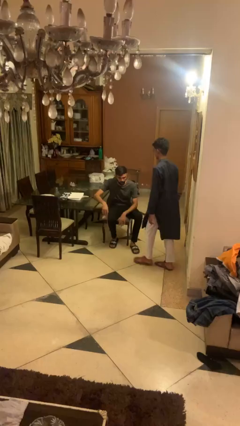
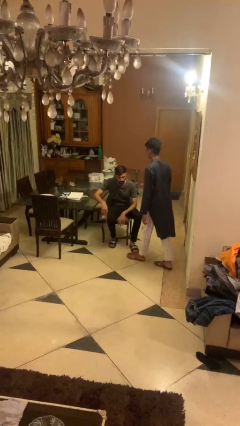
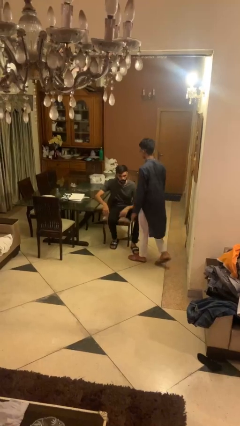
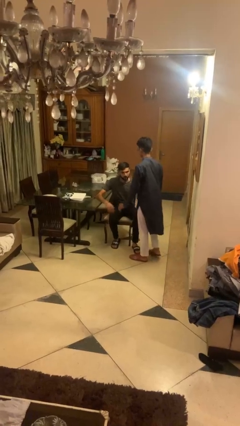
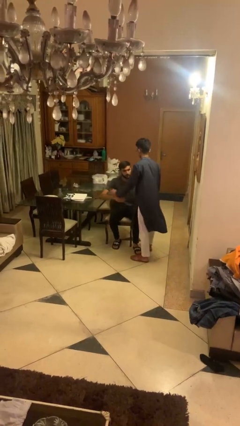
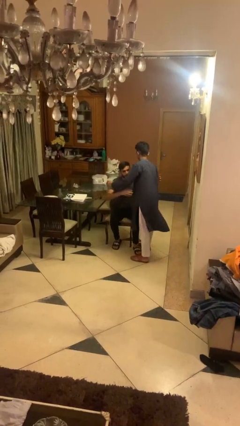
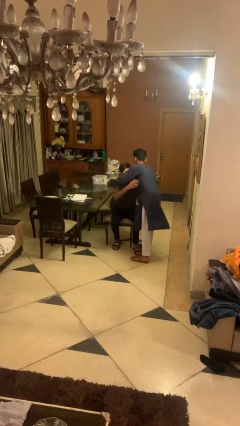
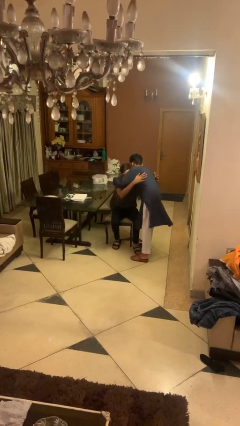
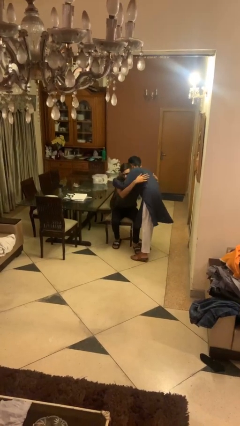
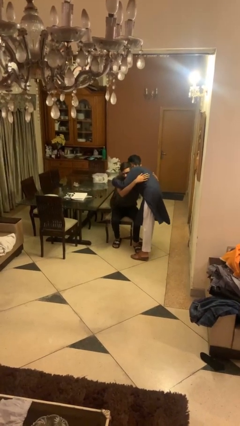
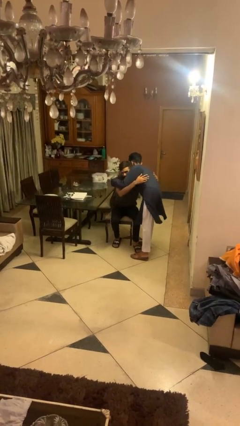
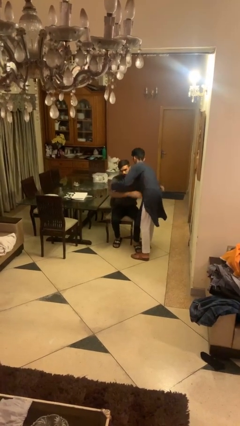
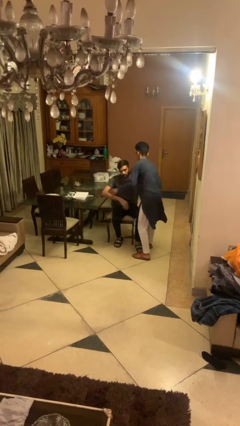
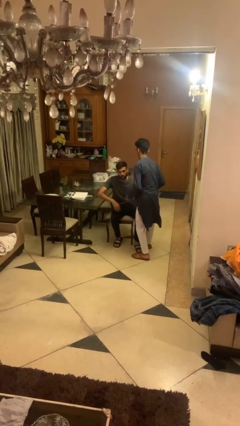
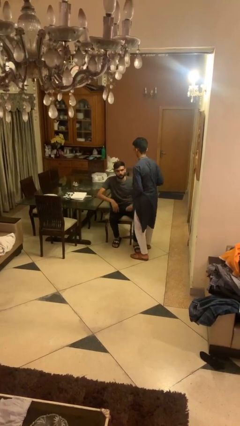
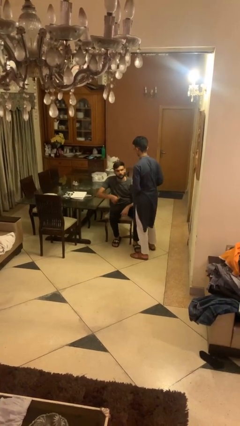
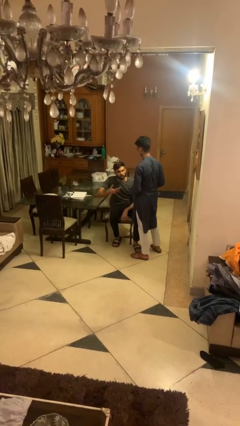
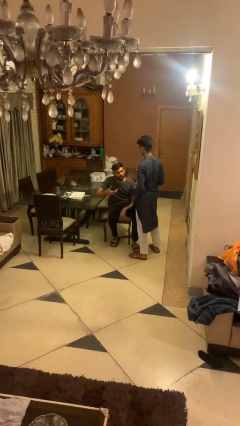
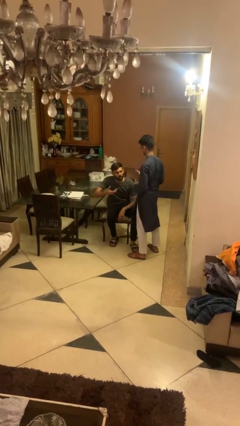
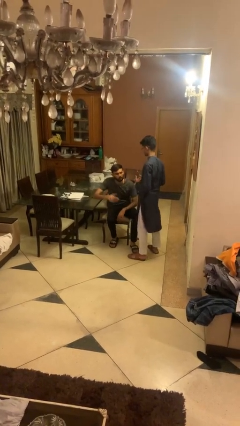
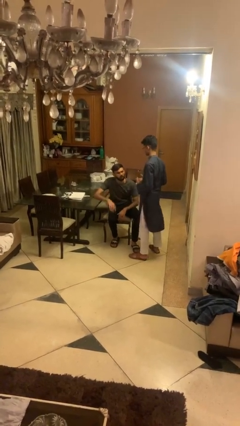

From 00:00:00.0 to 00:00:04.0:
person embraces person

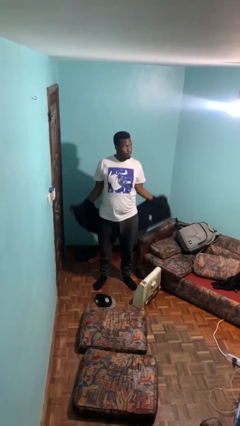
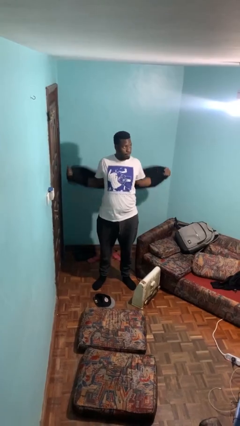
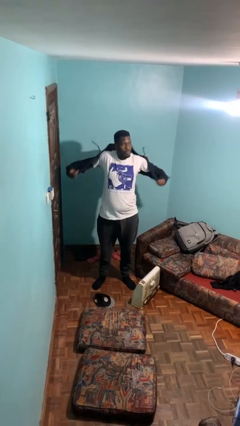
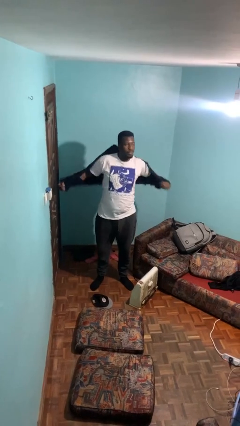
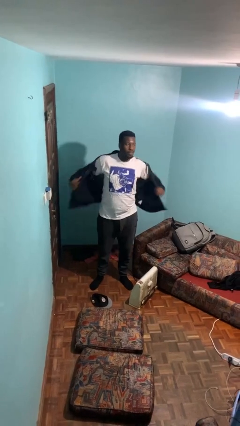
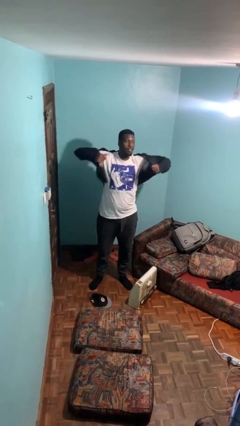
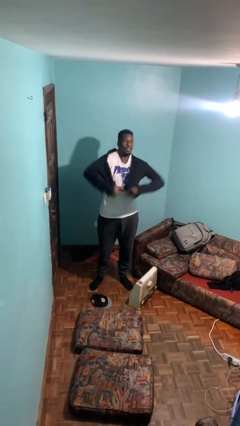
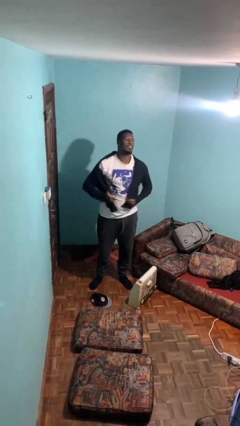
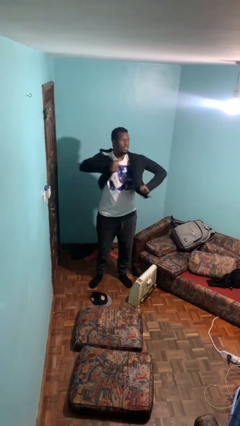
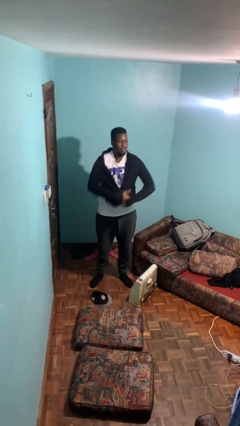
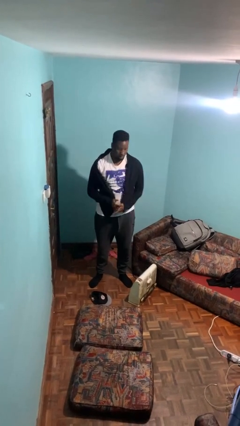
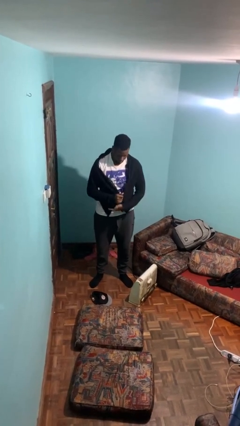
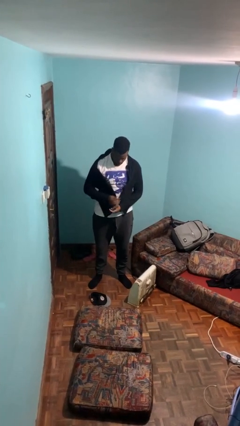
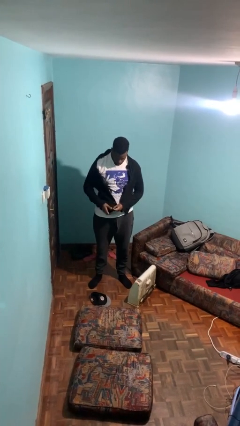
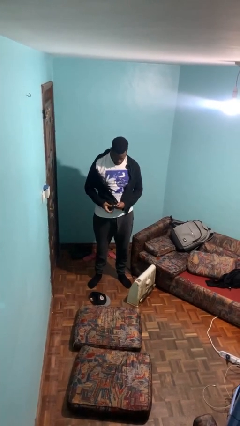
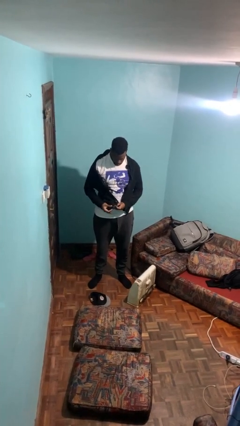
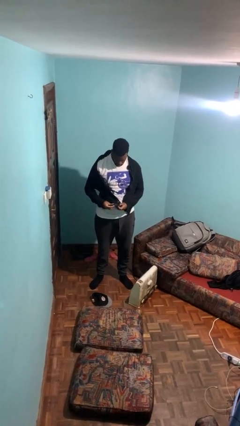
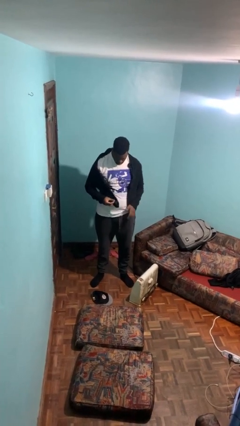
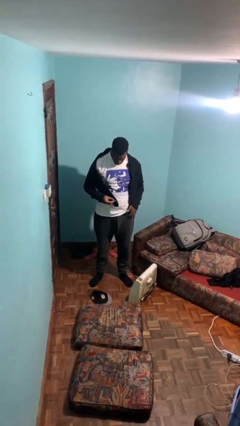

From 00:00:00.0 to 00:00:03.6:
person puts on jacket

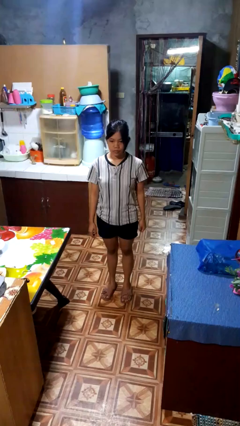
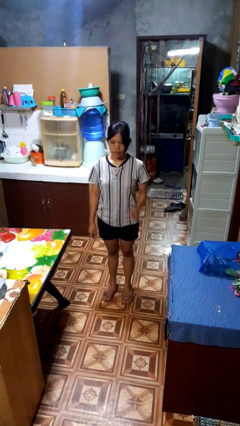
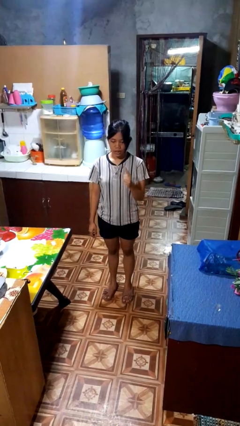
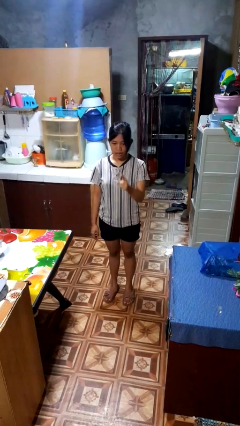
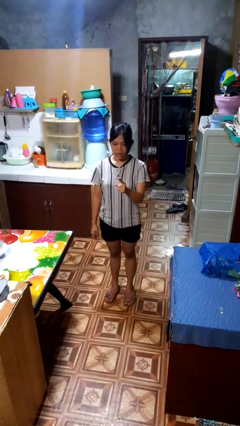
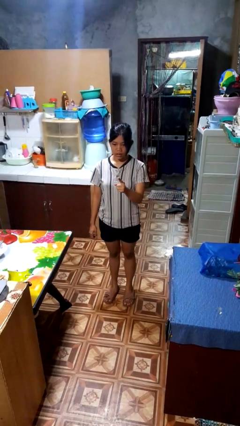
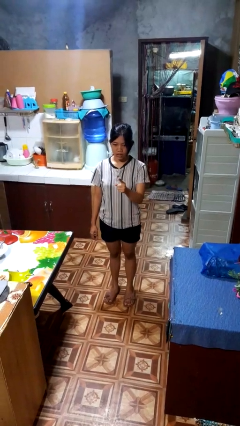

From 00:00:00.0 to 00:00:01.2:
person gestures number one

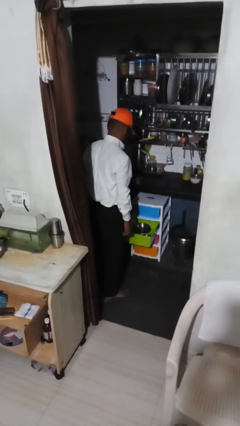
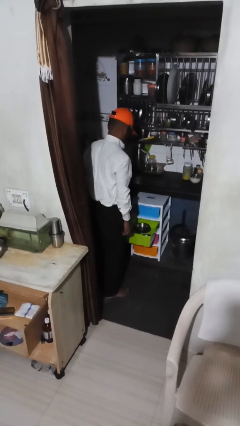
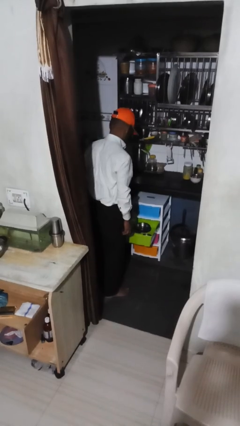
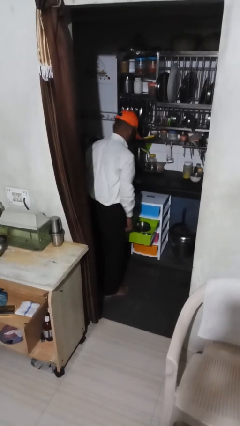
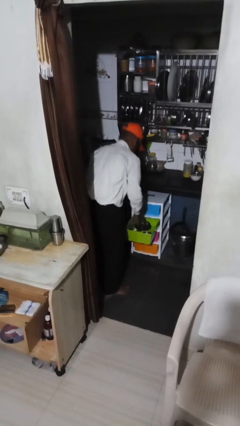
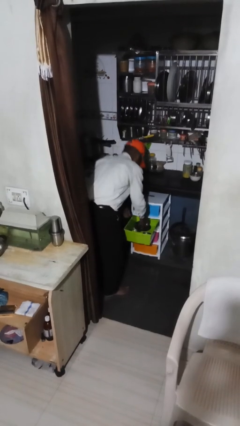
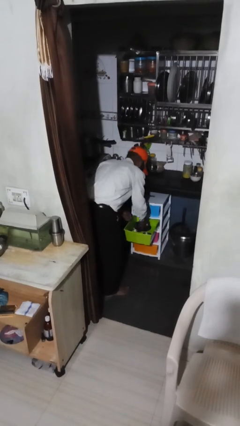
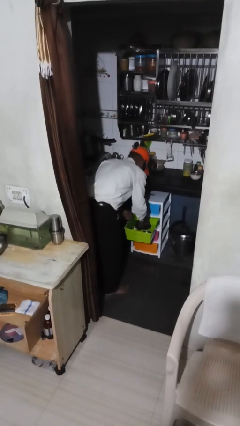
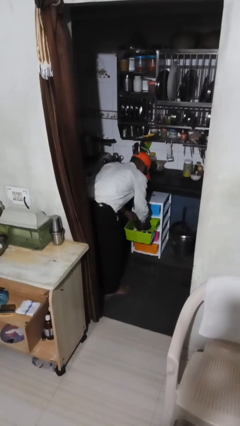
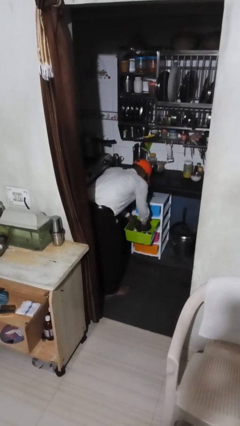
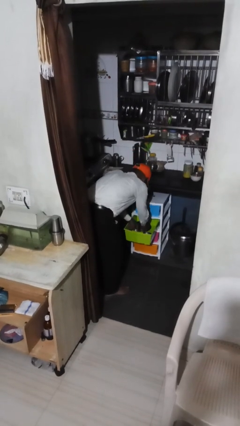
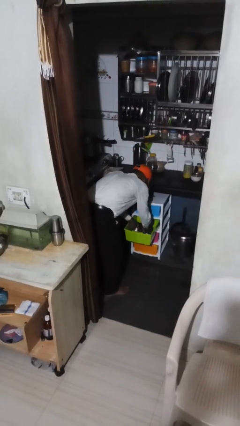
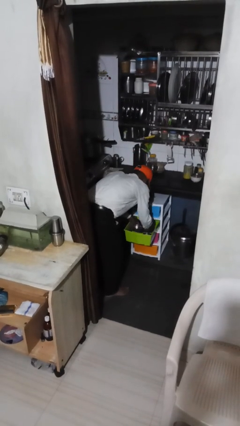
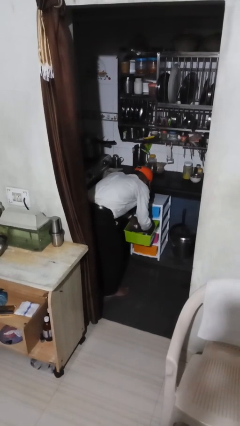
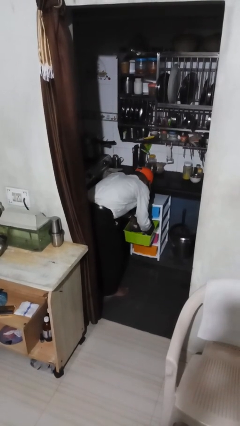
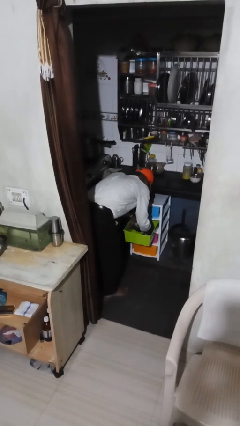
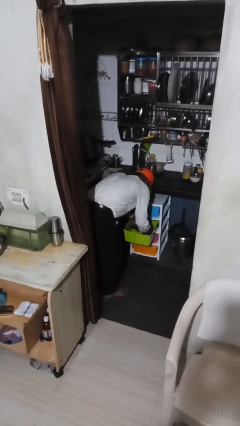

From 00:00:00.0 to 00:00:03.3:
person searches in kitchen drawer

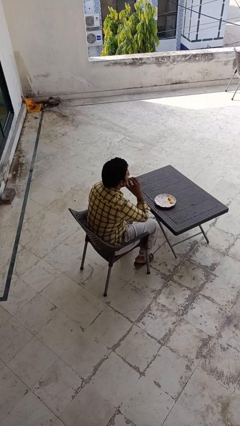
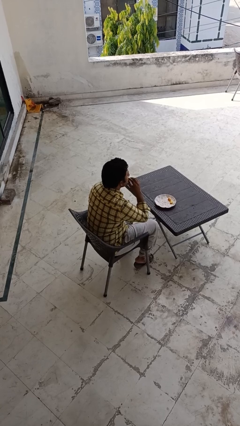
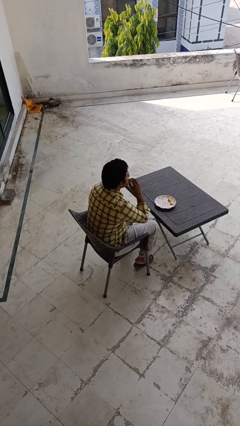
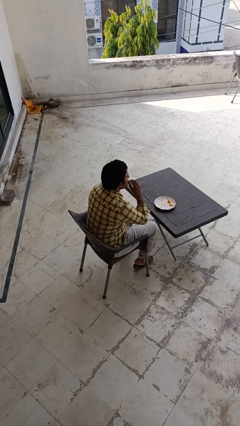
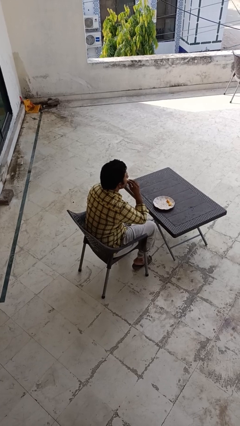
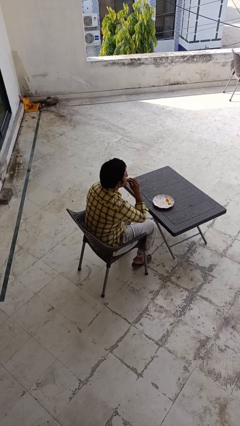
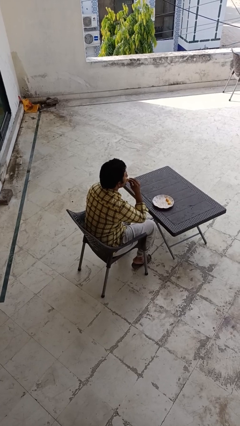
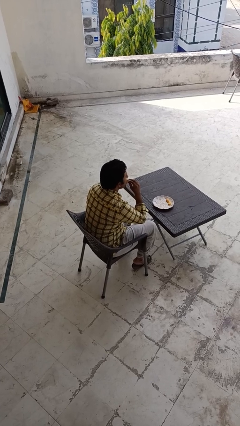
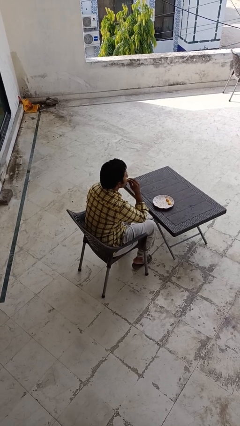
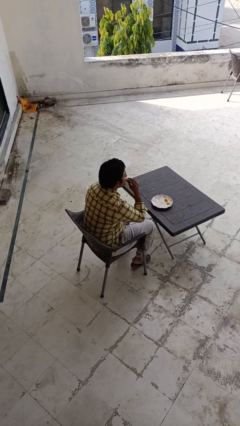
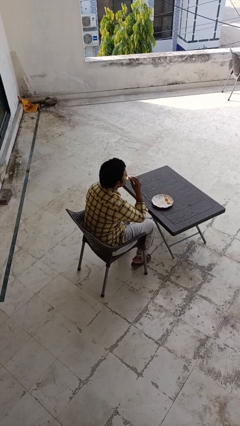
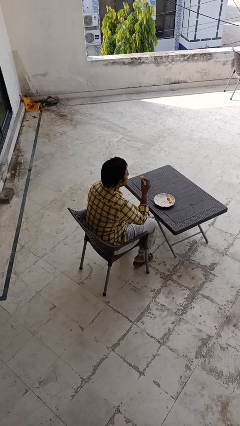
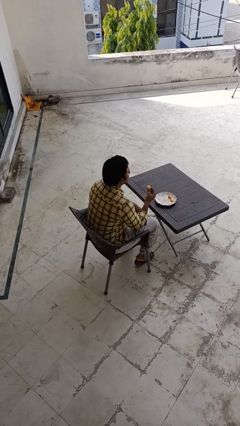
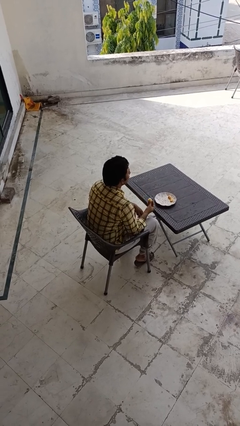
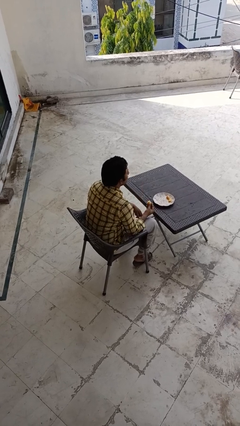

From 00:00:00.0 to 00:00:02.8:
person eats with hands

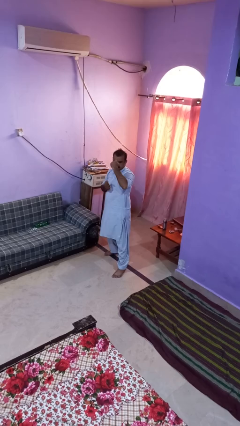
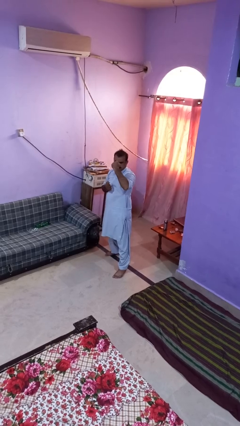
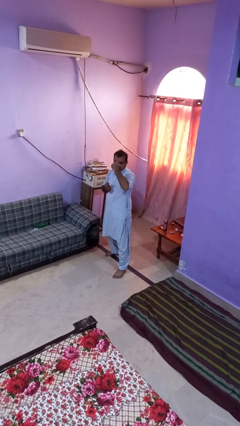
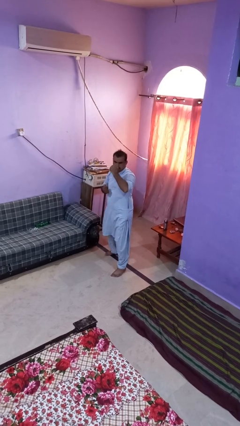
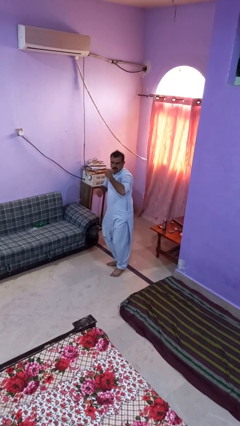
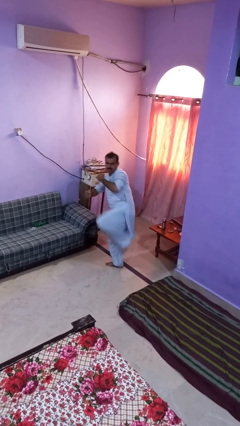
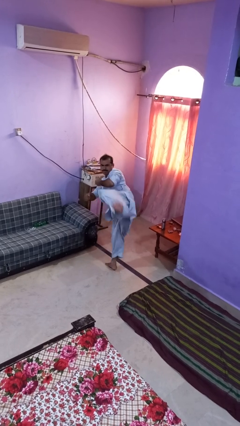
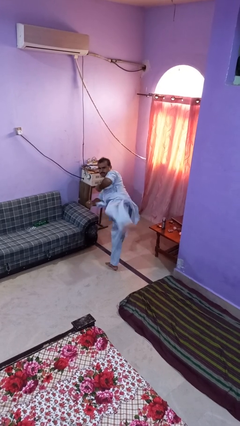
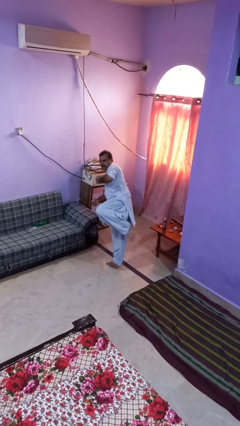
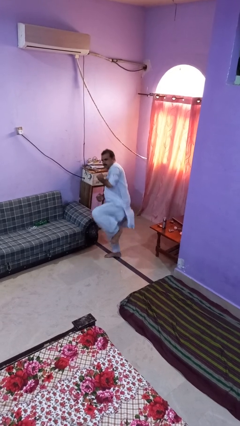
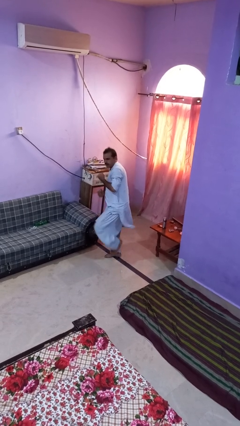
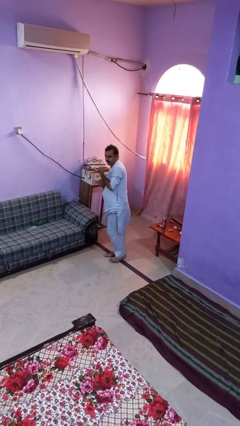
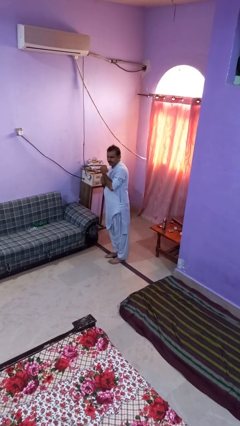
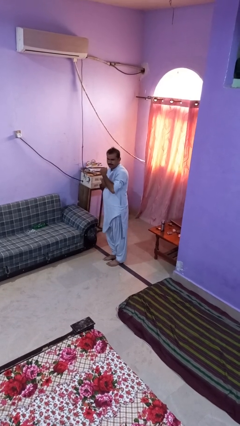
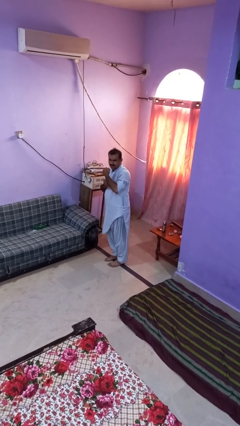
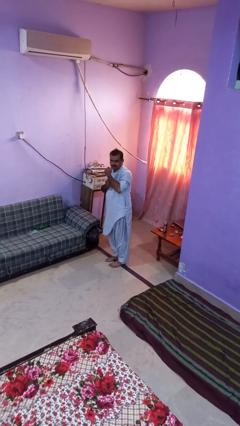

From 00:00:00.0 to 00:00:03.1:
person karate kicks
